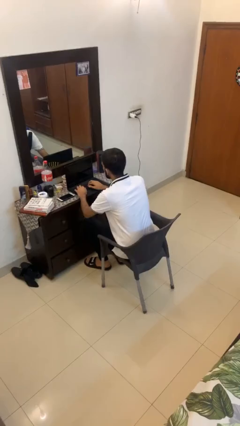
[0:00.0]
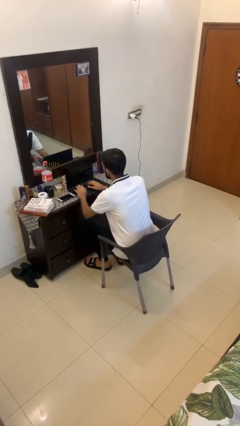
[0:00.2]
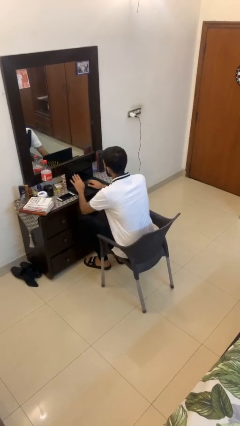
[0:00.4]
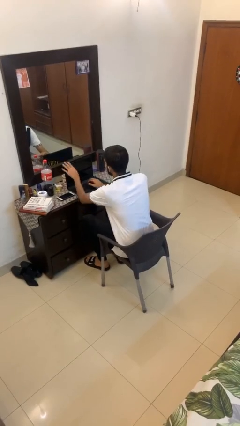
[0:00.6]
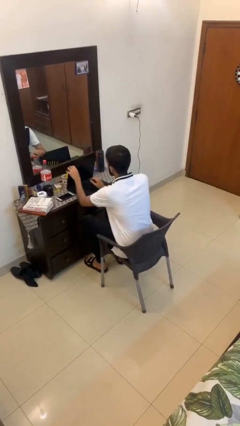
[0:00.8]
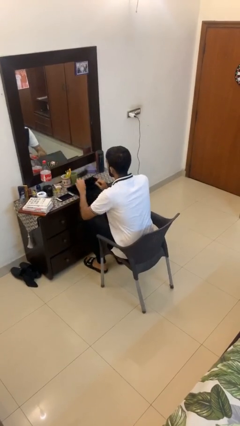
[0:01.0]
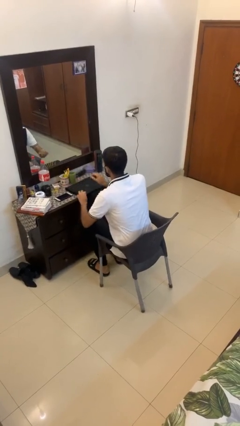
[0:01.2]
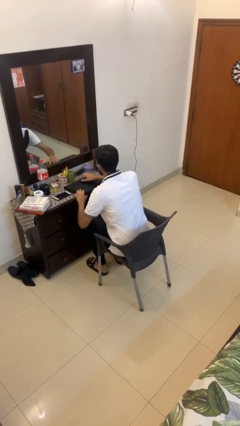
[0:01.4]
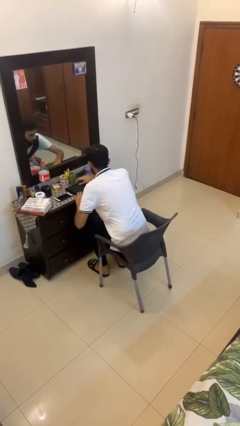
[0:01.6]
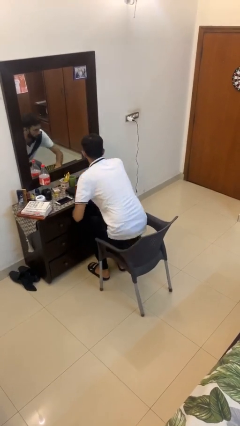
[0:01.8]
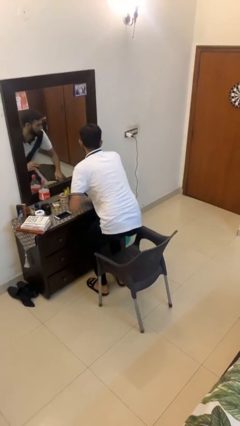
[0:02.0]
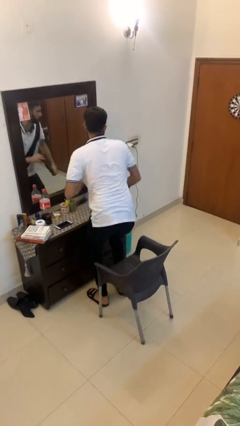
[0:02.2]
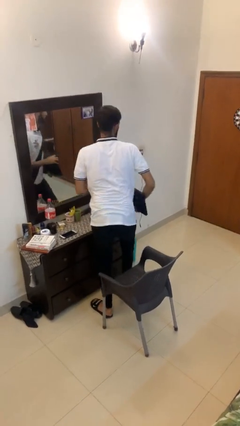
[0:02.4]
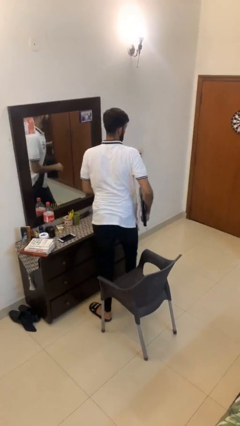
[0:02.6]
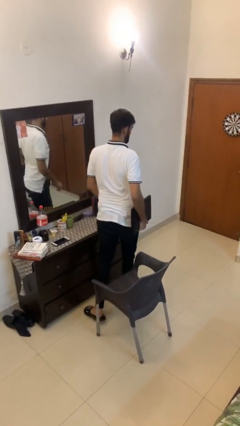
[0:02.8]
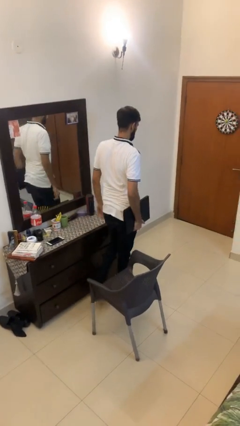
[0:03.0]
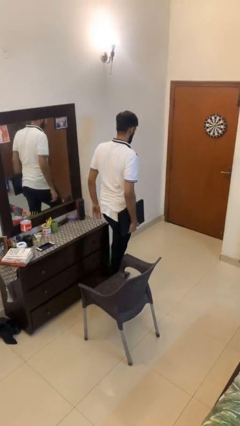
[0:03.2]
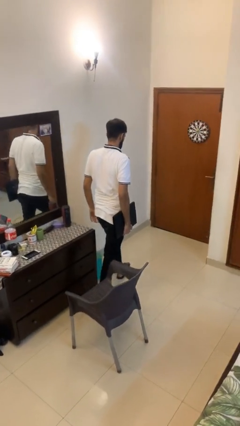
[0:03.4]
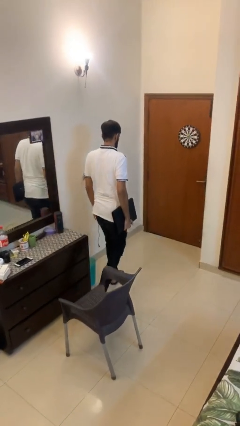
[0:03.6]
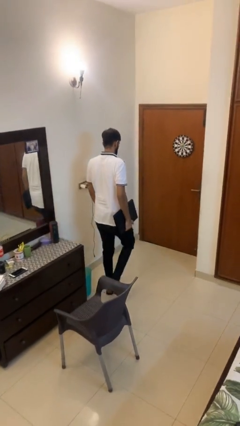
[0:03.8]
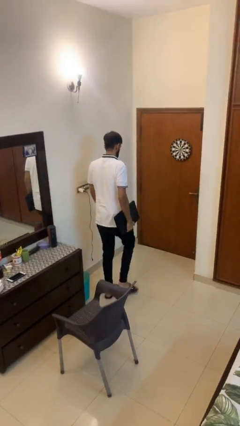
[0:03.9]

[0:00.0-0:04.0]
person stands up

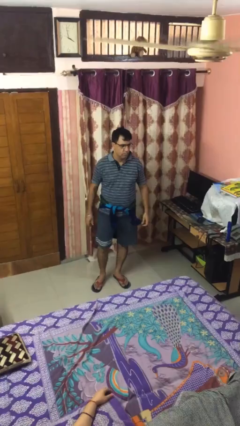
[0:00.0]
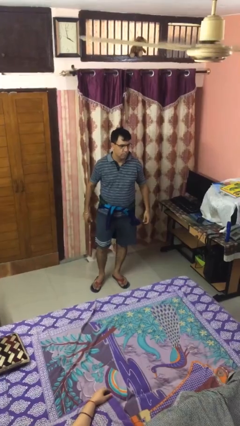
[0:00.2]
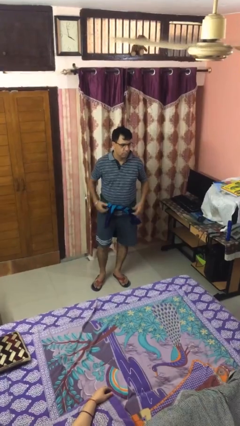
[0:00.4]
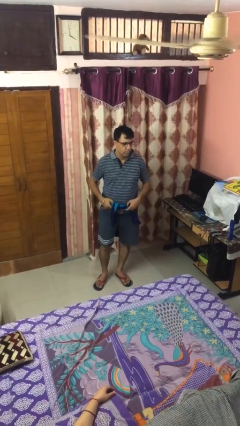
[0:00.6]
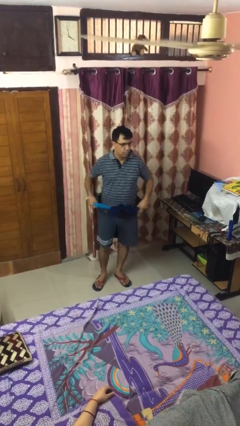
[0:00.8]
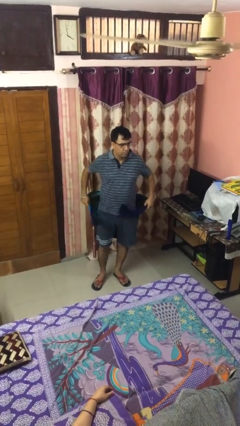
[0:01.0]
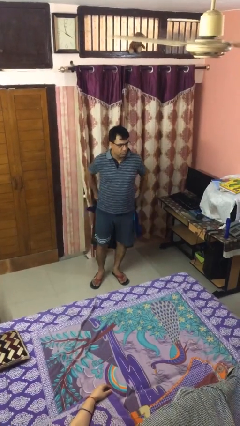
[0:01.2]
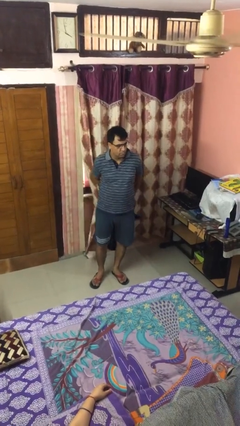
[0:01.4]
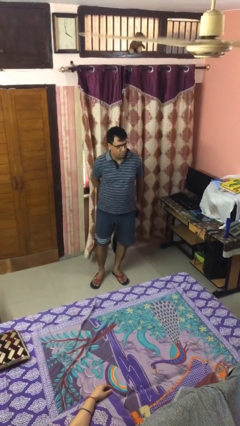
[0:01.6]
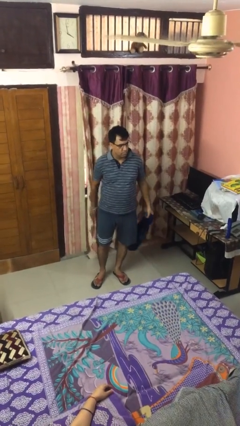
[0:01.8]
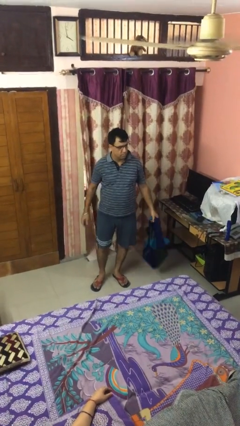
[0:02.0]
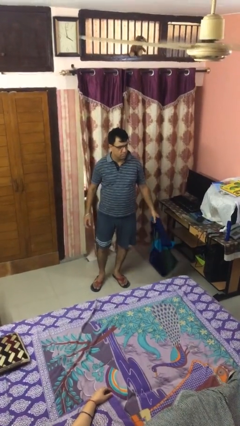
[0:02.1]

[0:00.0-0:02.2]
person unties jacket around waist

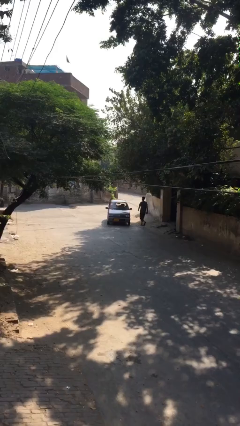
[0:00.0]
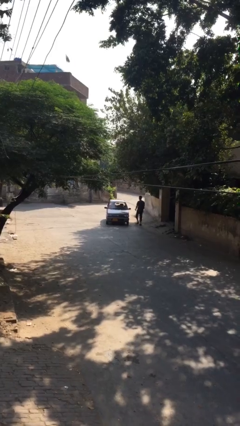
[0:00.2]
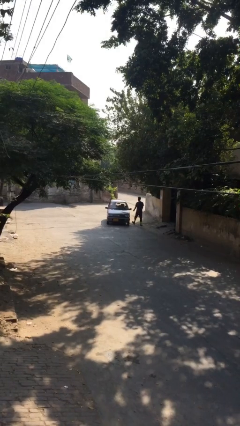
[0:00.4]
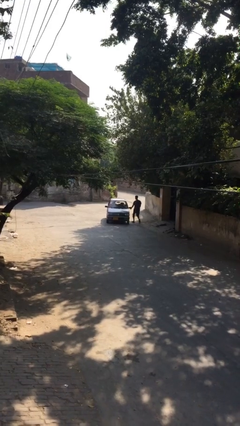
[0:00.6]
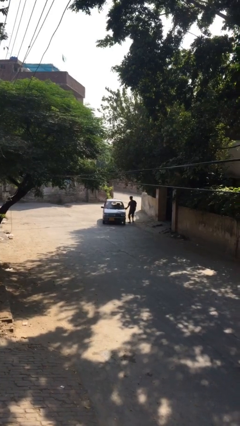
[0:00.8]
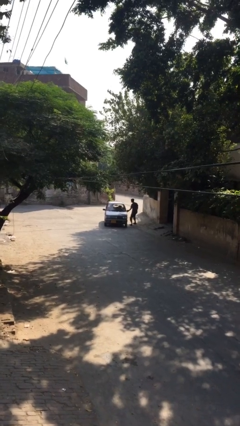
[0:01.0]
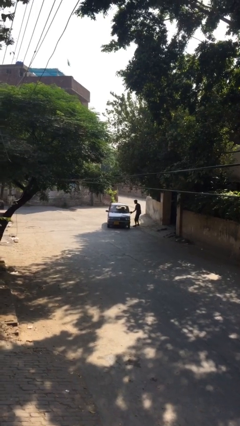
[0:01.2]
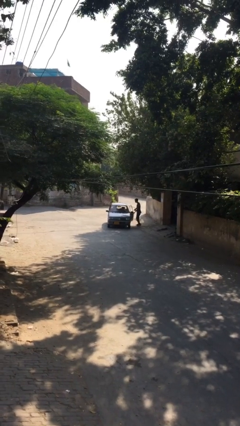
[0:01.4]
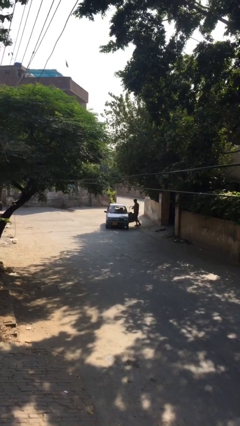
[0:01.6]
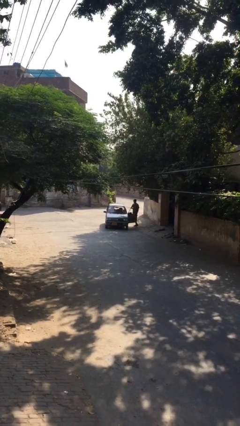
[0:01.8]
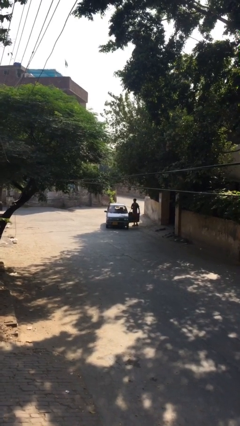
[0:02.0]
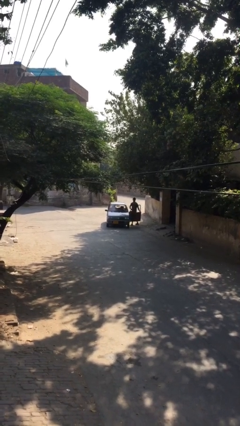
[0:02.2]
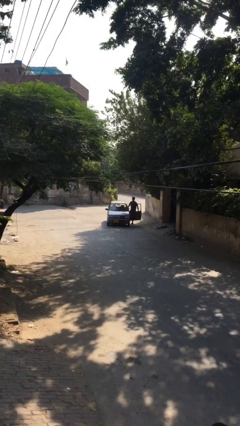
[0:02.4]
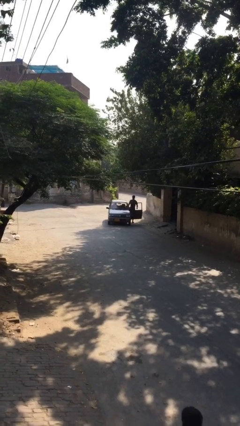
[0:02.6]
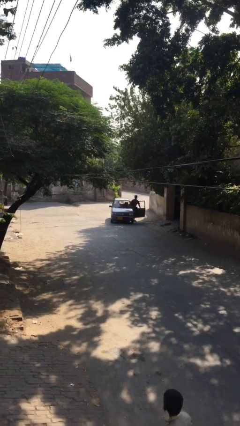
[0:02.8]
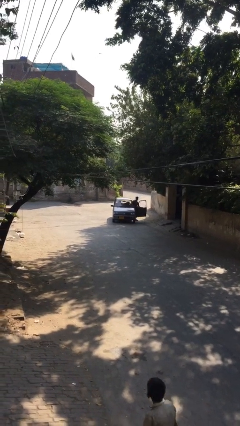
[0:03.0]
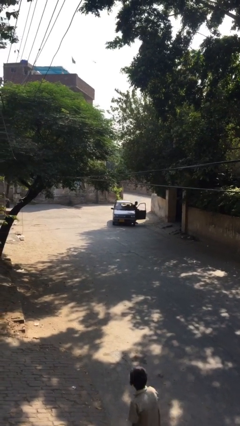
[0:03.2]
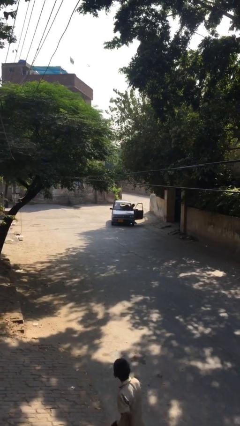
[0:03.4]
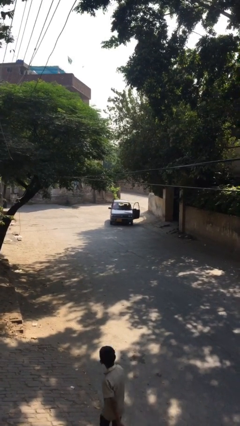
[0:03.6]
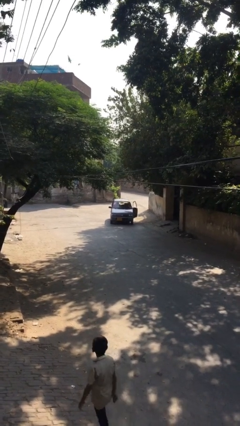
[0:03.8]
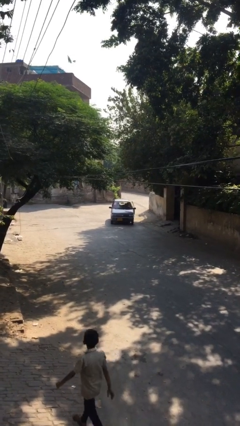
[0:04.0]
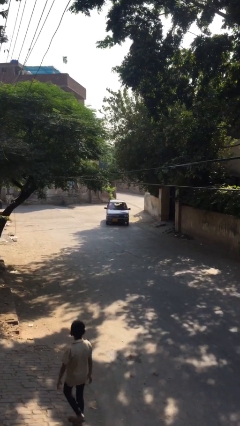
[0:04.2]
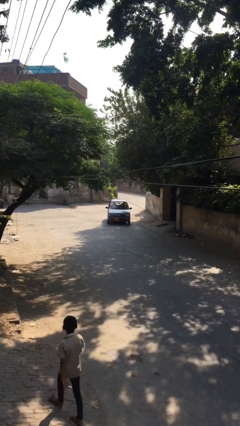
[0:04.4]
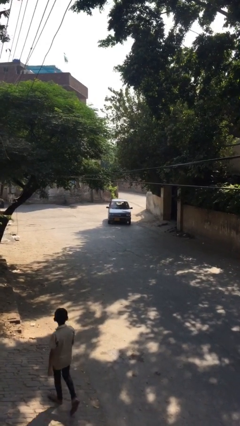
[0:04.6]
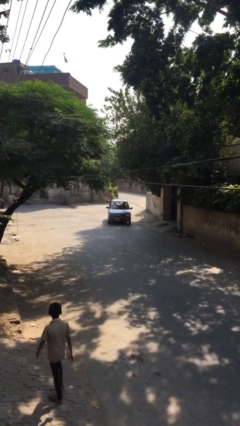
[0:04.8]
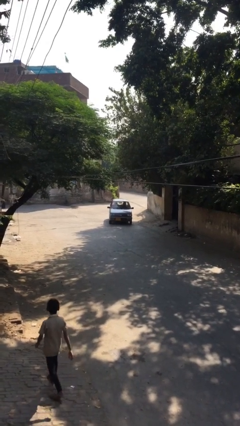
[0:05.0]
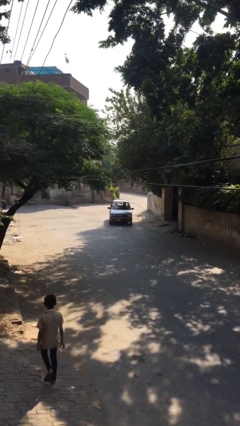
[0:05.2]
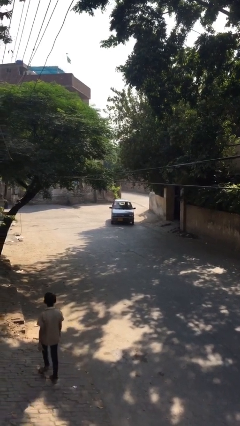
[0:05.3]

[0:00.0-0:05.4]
car picks up person

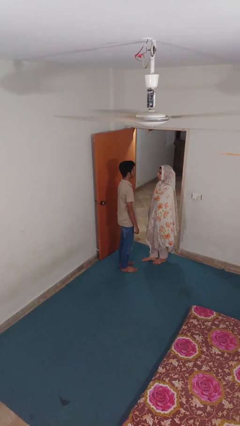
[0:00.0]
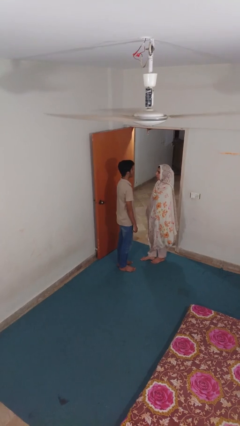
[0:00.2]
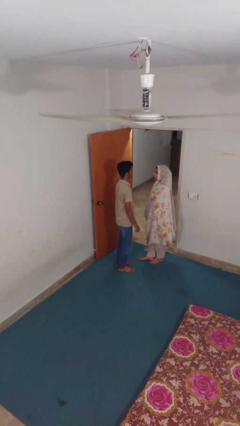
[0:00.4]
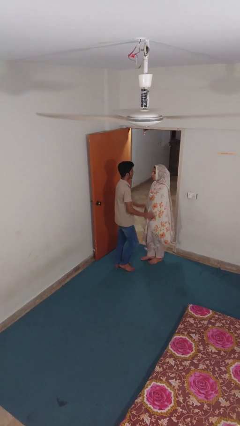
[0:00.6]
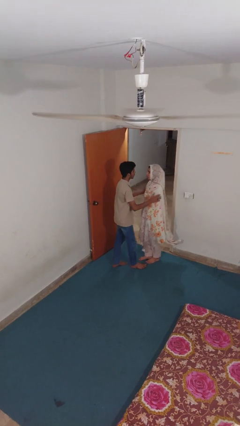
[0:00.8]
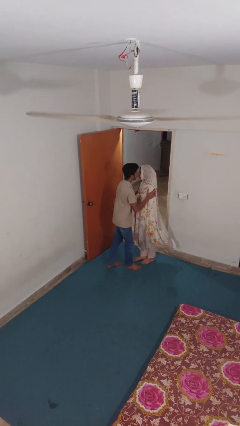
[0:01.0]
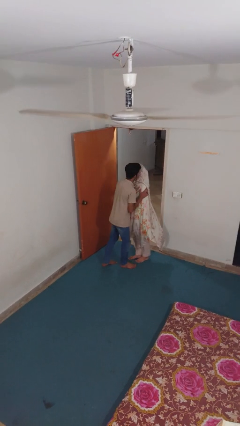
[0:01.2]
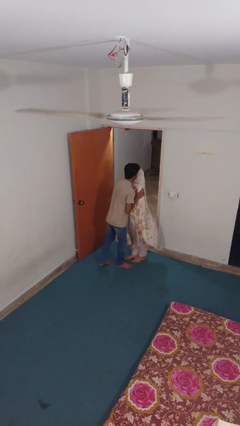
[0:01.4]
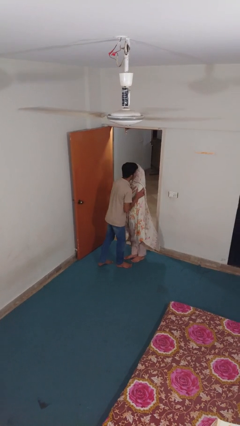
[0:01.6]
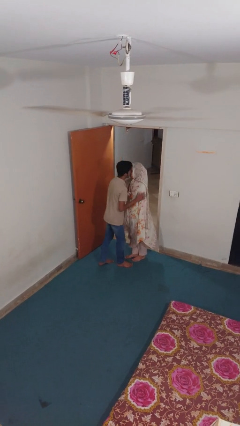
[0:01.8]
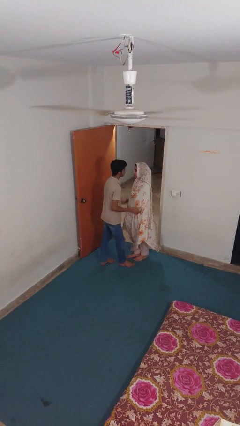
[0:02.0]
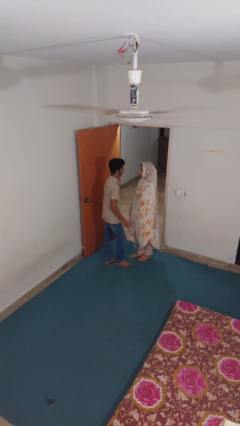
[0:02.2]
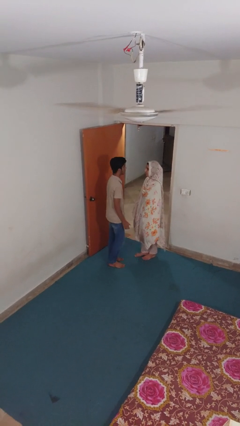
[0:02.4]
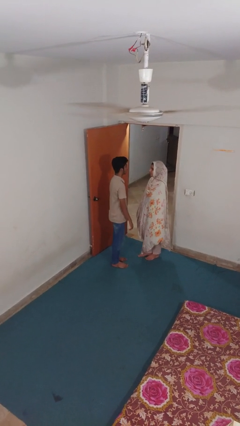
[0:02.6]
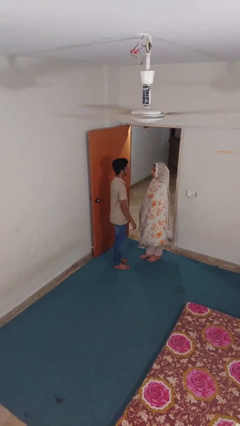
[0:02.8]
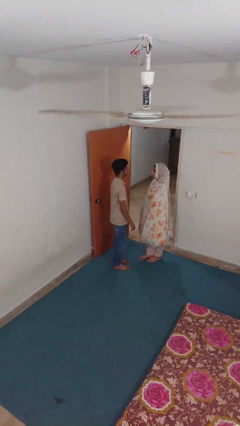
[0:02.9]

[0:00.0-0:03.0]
person kisses cheek of person

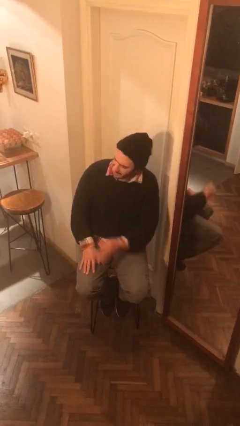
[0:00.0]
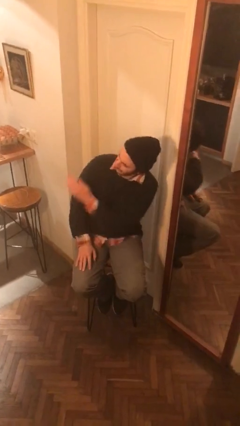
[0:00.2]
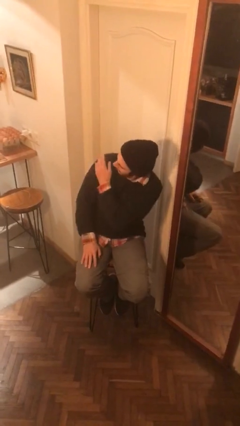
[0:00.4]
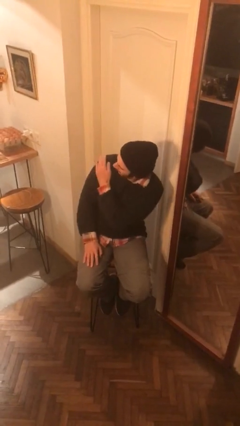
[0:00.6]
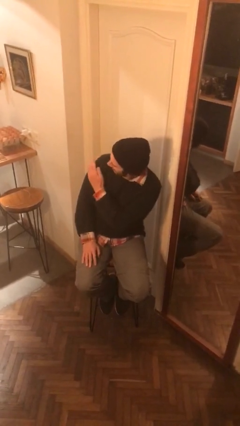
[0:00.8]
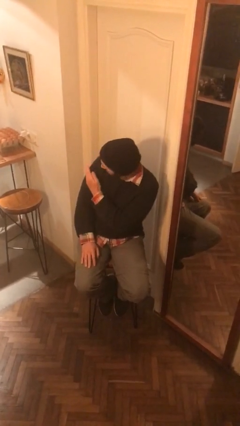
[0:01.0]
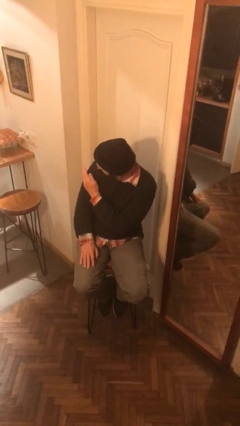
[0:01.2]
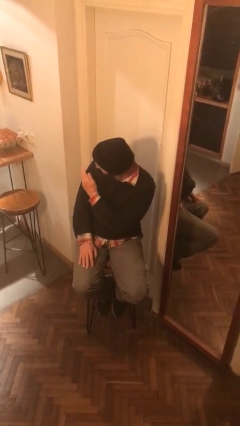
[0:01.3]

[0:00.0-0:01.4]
person swats bug

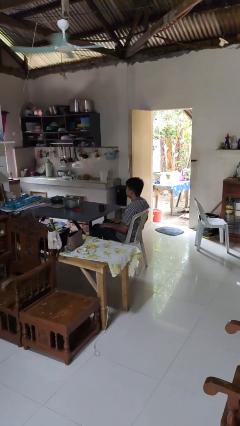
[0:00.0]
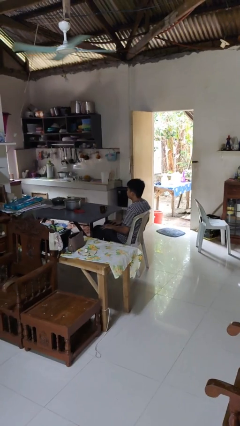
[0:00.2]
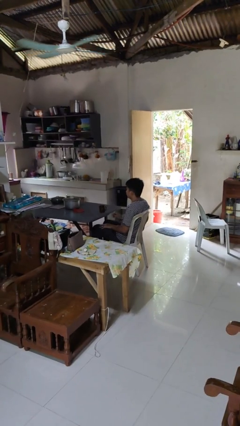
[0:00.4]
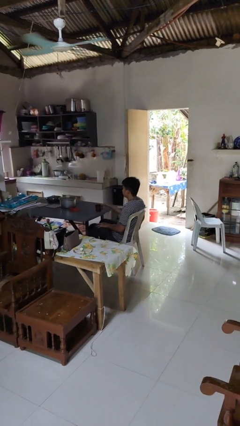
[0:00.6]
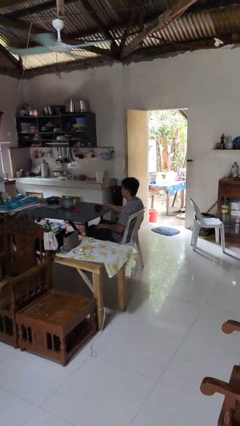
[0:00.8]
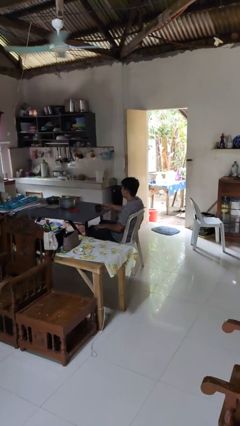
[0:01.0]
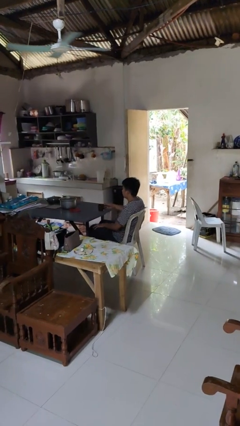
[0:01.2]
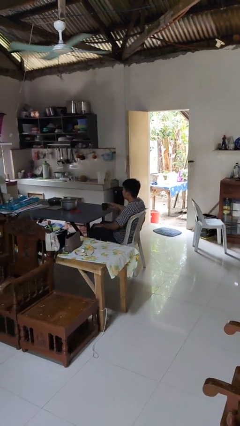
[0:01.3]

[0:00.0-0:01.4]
person picks up object from table
